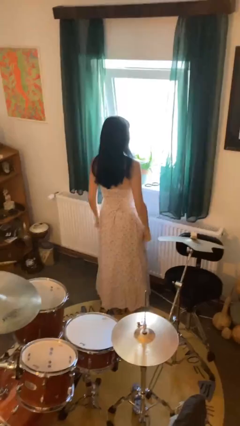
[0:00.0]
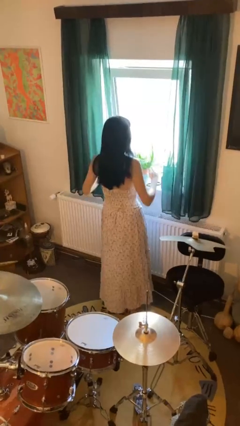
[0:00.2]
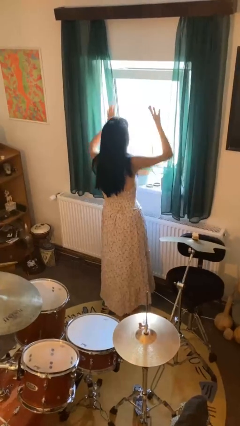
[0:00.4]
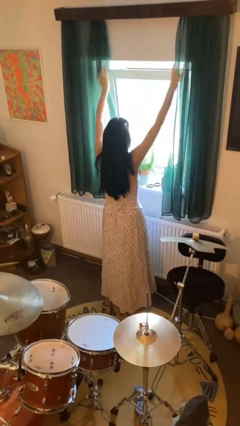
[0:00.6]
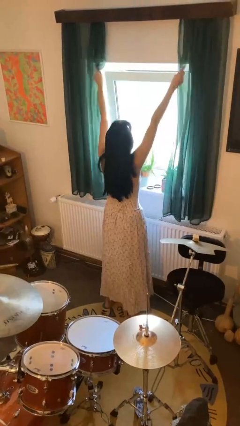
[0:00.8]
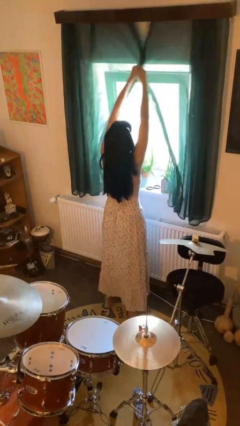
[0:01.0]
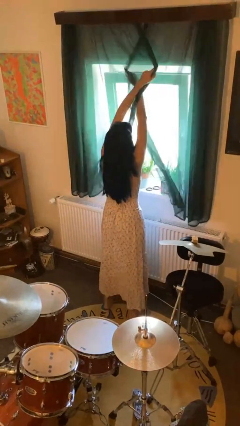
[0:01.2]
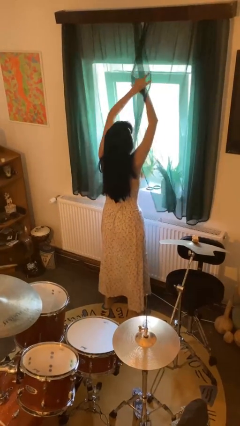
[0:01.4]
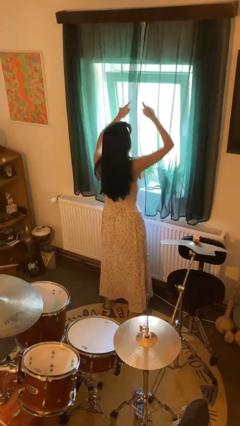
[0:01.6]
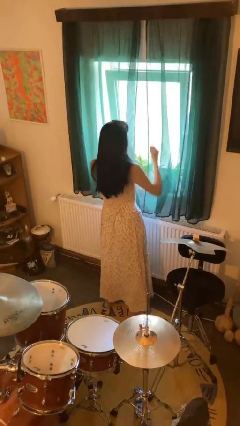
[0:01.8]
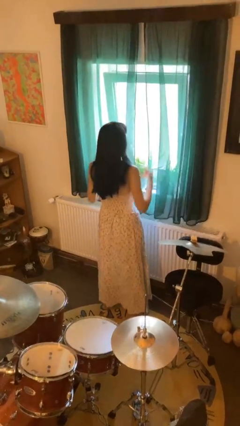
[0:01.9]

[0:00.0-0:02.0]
person closes curtains

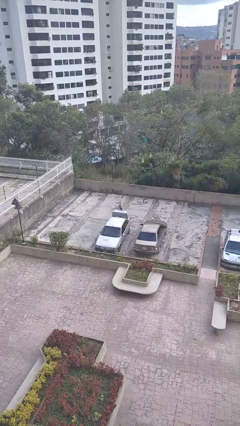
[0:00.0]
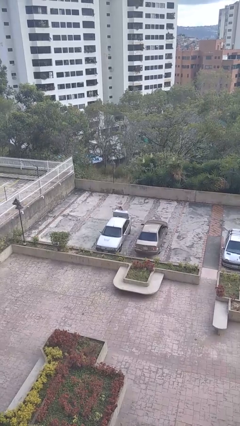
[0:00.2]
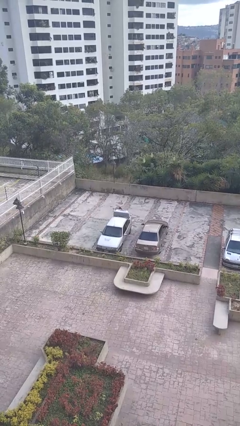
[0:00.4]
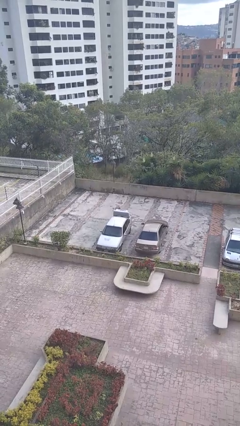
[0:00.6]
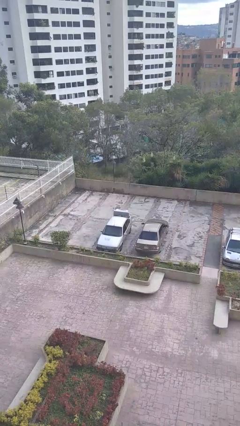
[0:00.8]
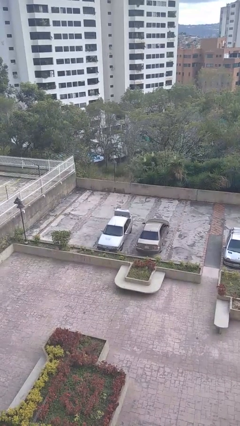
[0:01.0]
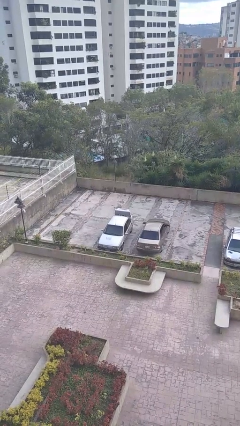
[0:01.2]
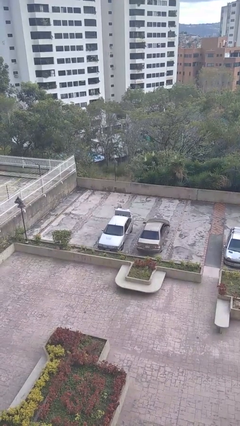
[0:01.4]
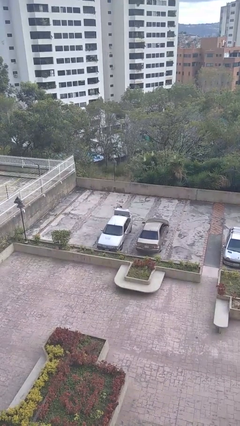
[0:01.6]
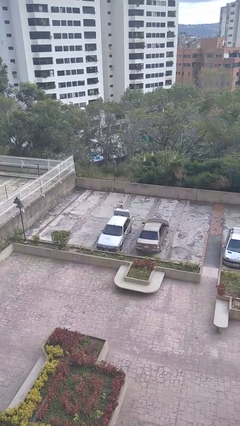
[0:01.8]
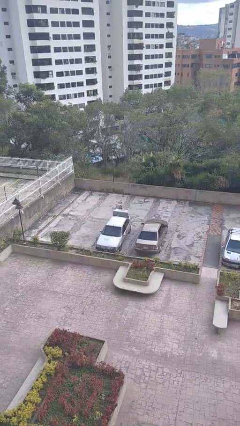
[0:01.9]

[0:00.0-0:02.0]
person loads car

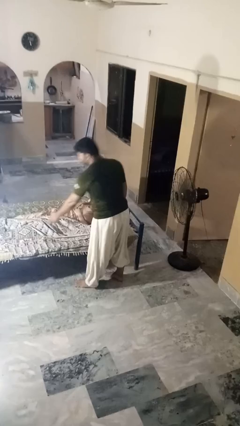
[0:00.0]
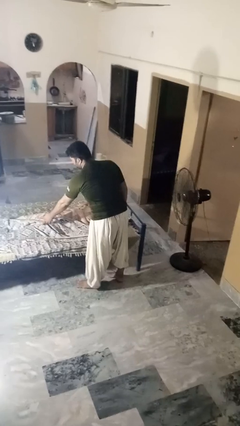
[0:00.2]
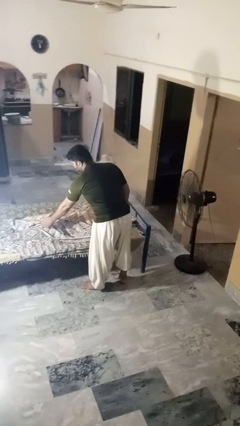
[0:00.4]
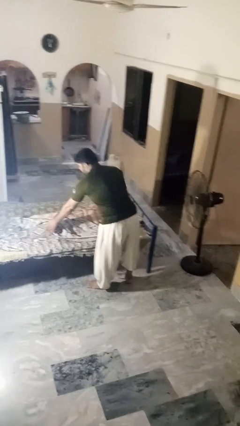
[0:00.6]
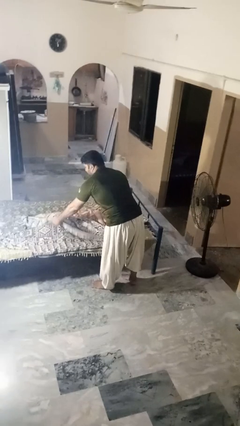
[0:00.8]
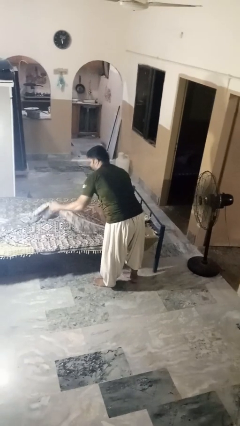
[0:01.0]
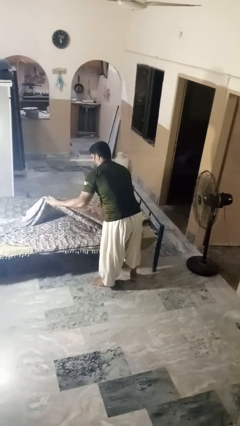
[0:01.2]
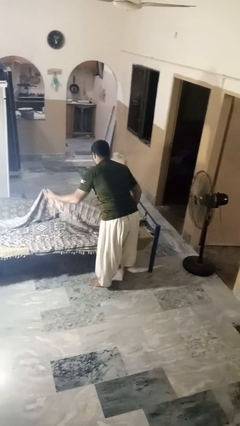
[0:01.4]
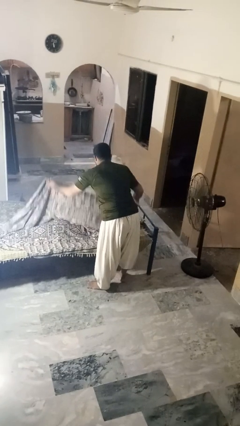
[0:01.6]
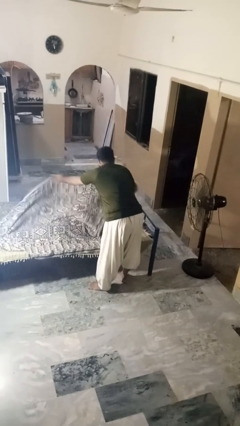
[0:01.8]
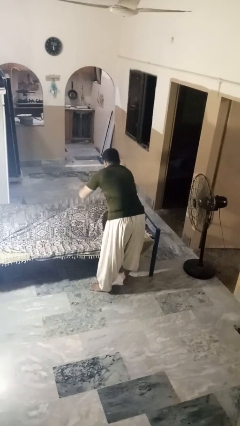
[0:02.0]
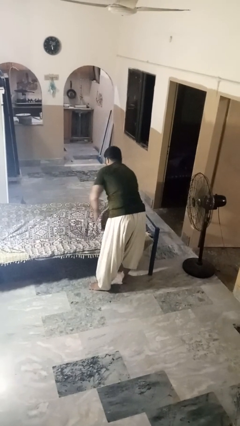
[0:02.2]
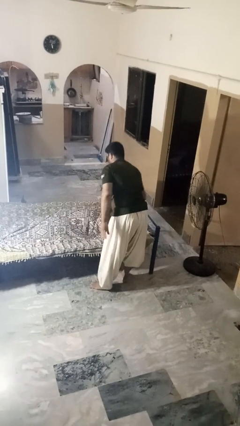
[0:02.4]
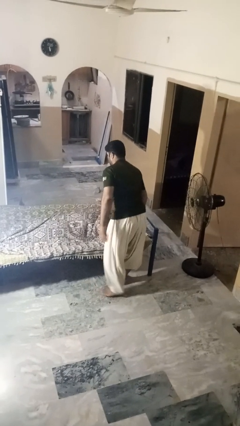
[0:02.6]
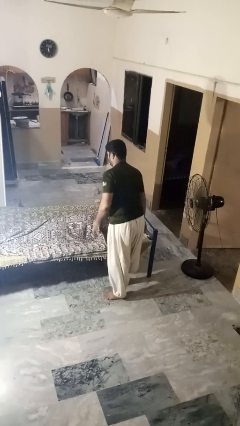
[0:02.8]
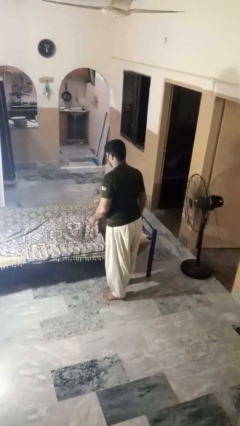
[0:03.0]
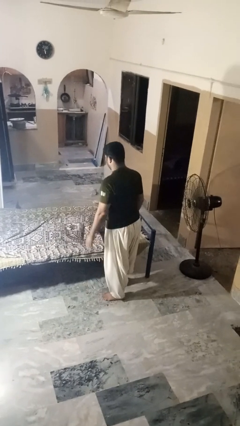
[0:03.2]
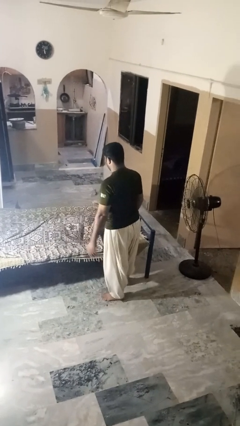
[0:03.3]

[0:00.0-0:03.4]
person covers friend with blanket

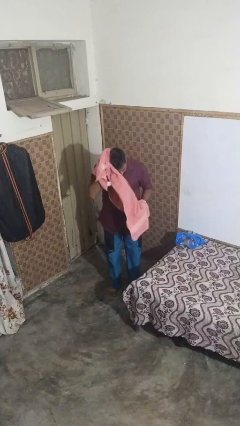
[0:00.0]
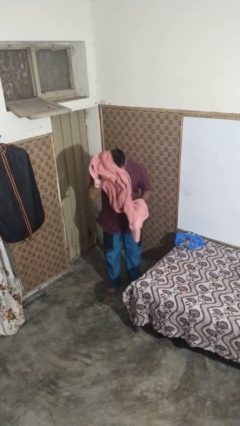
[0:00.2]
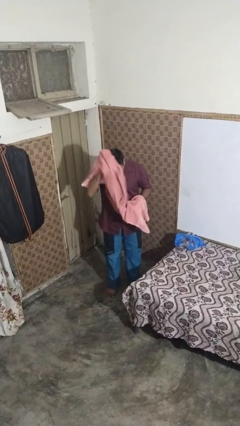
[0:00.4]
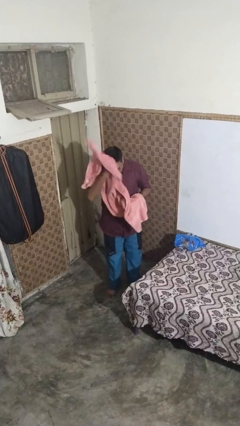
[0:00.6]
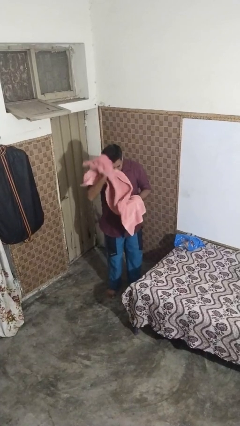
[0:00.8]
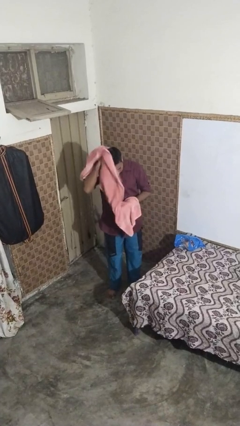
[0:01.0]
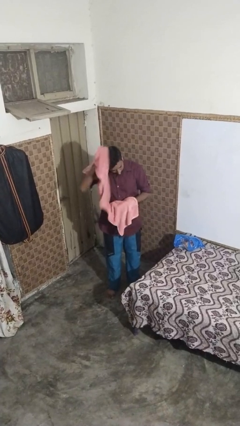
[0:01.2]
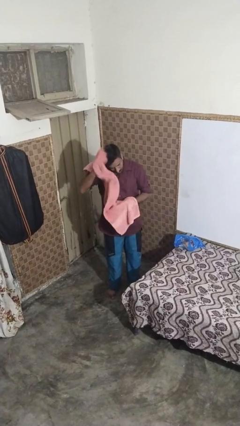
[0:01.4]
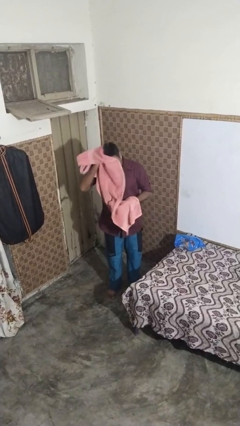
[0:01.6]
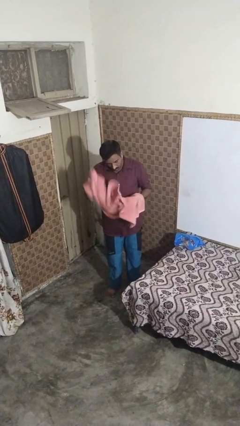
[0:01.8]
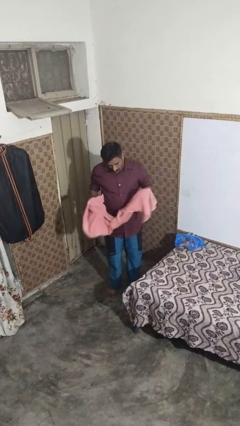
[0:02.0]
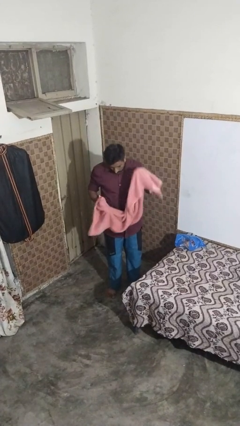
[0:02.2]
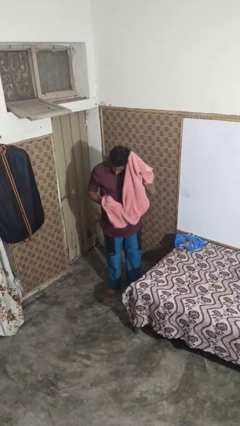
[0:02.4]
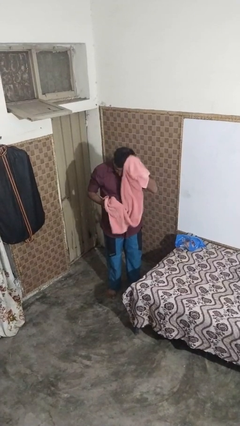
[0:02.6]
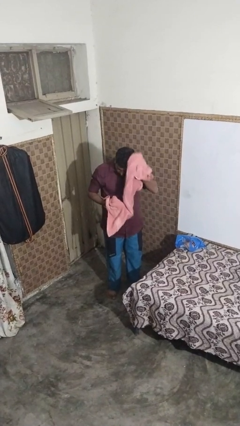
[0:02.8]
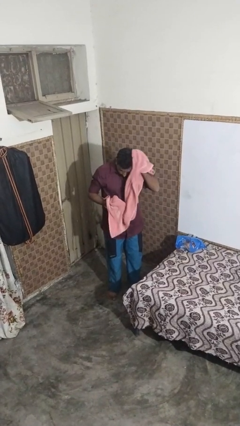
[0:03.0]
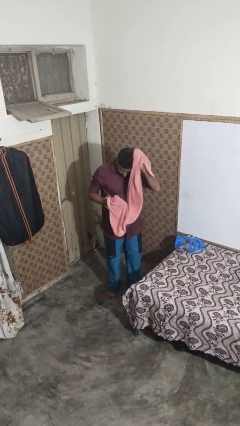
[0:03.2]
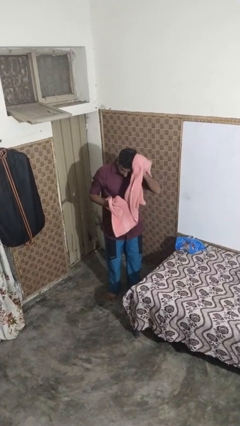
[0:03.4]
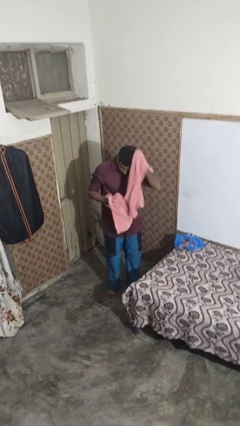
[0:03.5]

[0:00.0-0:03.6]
person dries hair with towel

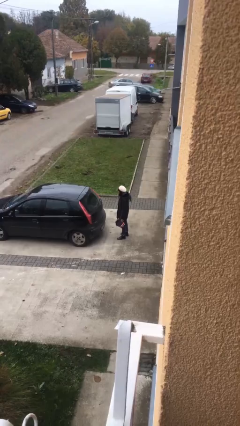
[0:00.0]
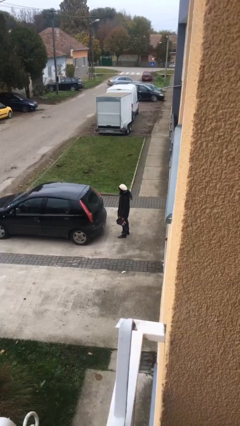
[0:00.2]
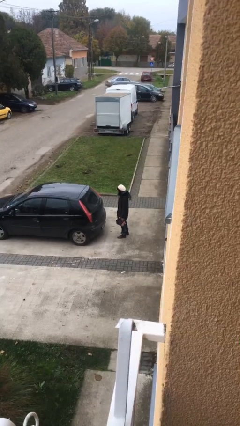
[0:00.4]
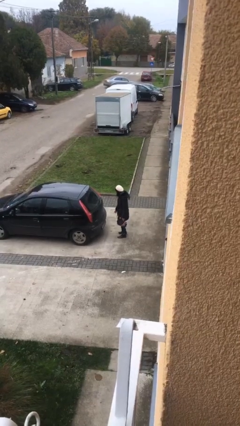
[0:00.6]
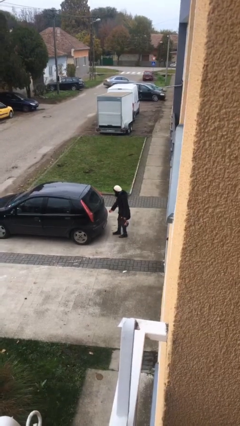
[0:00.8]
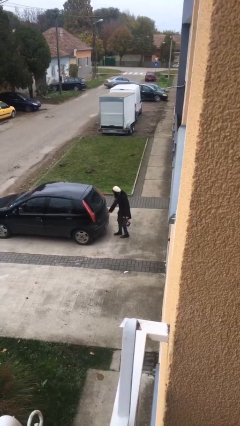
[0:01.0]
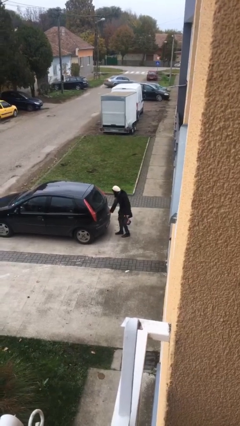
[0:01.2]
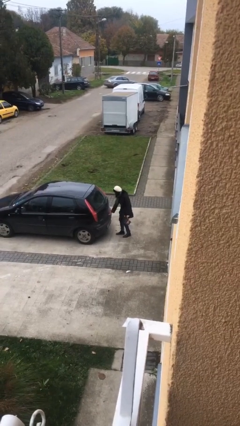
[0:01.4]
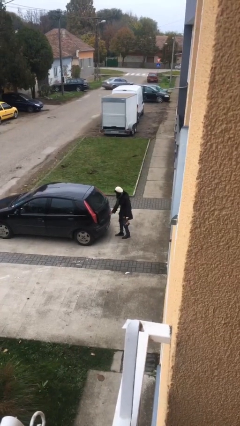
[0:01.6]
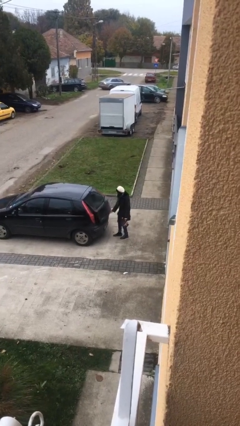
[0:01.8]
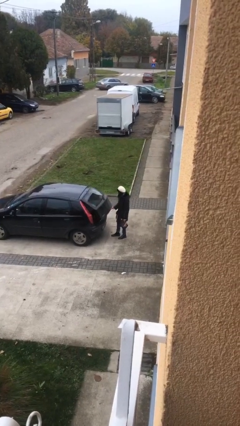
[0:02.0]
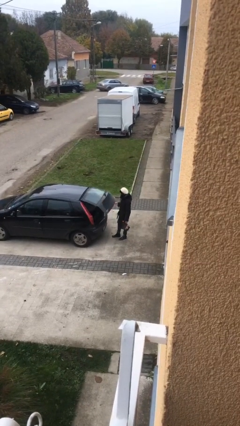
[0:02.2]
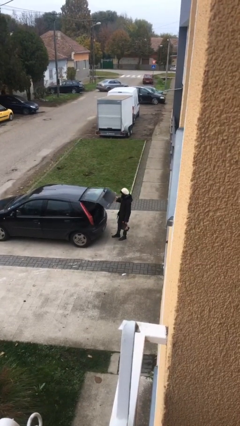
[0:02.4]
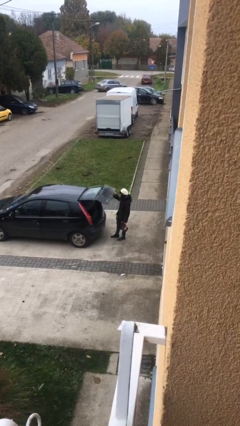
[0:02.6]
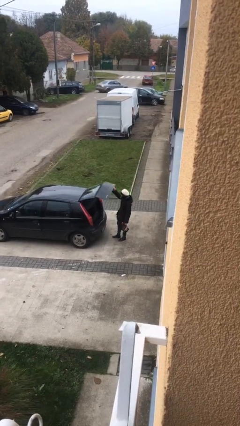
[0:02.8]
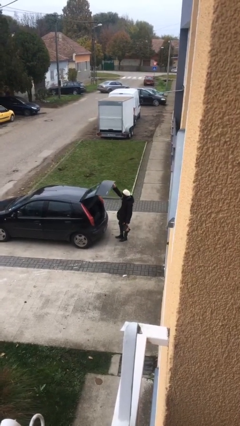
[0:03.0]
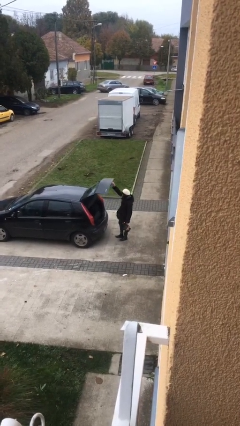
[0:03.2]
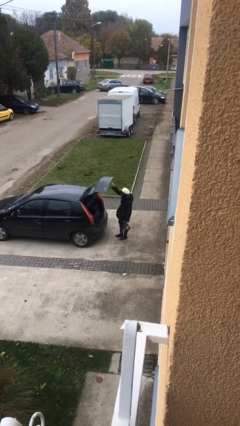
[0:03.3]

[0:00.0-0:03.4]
person opens car trunk

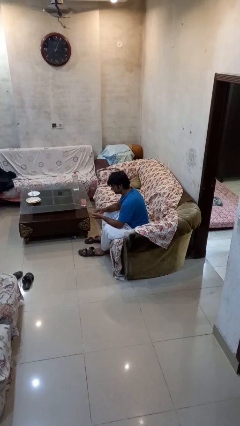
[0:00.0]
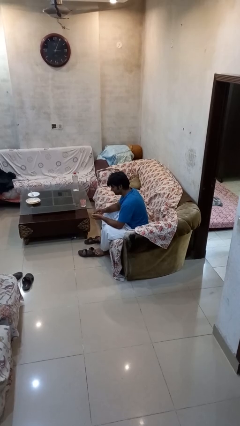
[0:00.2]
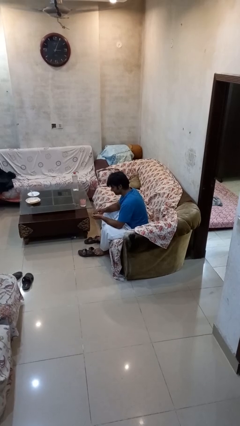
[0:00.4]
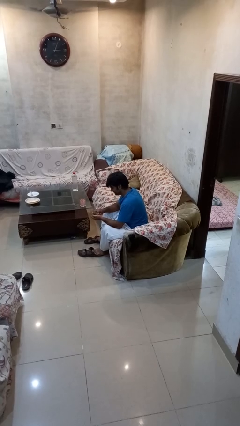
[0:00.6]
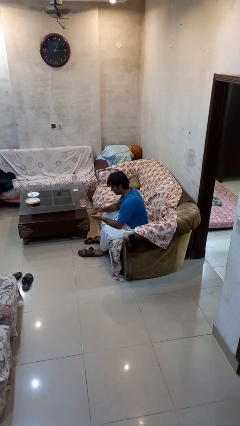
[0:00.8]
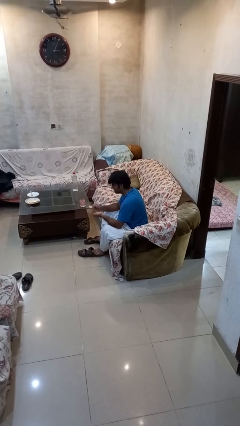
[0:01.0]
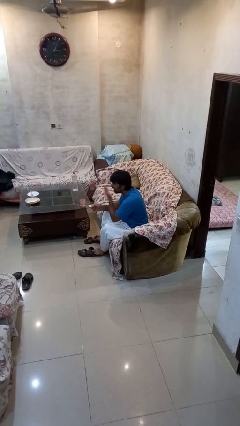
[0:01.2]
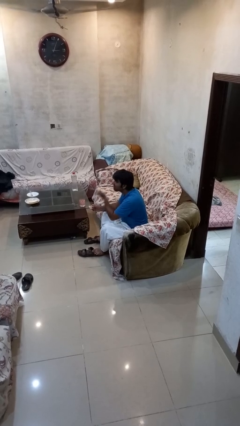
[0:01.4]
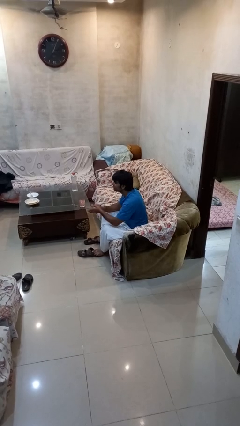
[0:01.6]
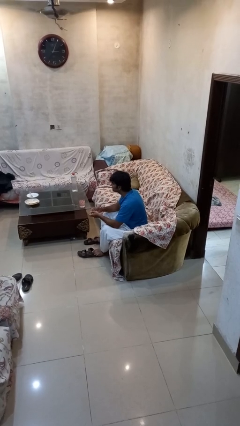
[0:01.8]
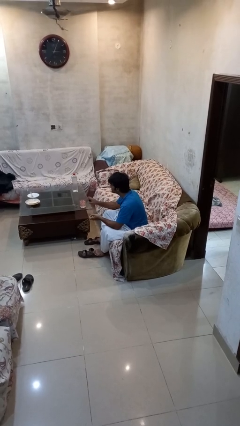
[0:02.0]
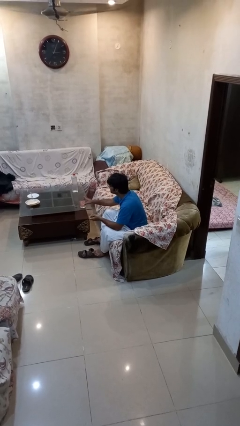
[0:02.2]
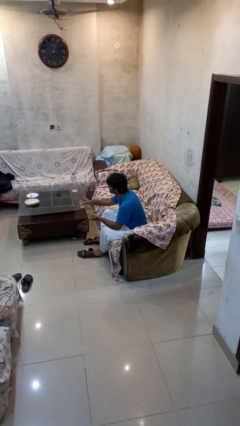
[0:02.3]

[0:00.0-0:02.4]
person takes medicine pills

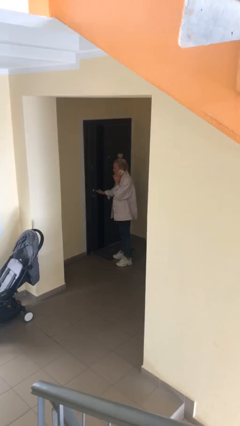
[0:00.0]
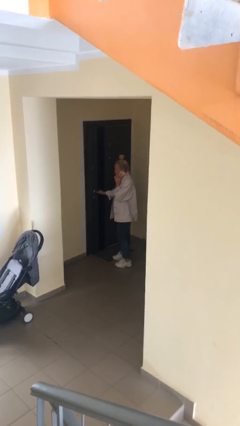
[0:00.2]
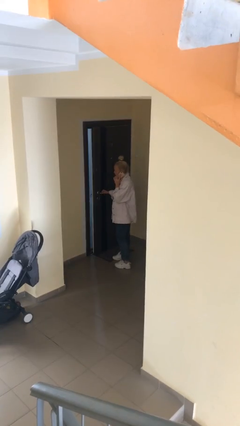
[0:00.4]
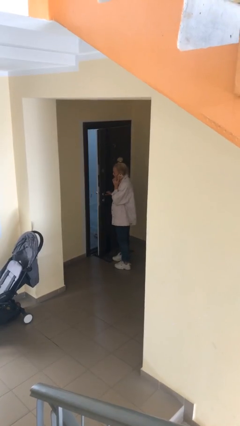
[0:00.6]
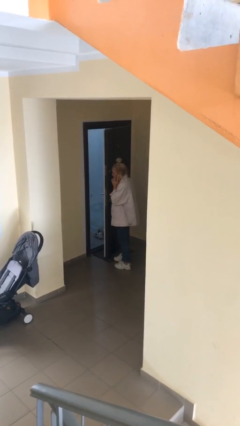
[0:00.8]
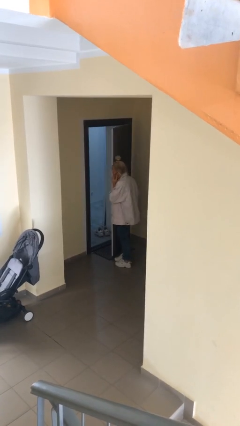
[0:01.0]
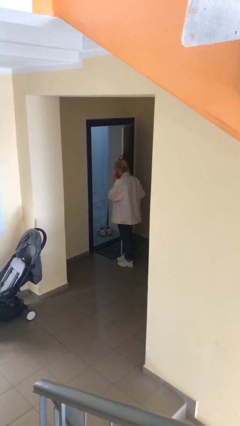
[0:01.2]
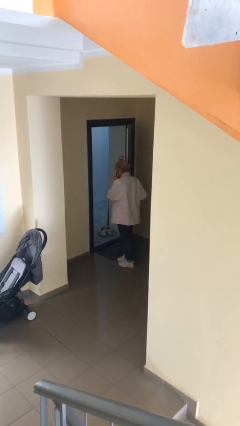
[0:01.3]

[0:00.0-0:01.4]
person opens facility door
